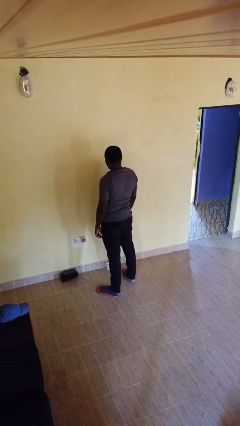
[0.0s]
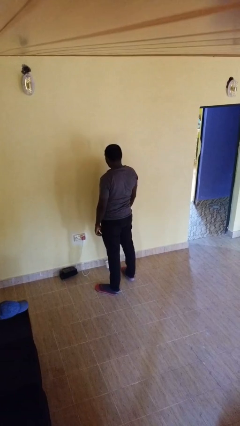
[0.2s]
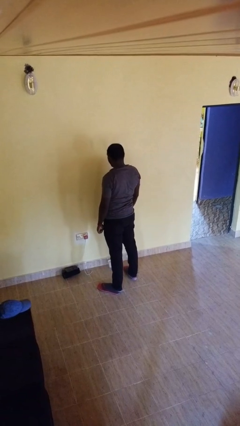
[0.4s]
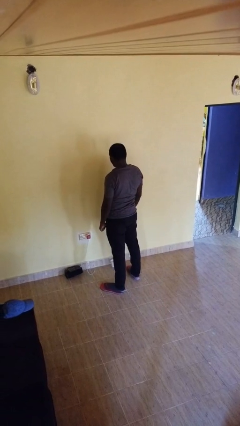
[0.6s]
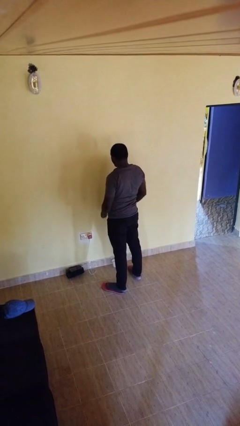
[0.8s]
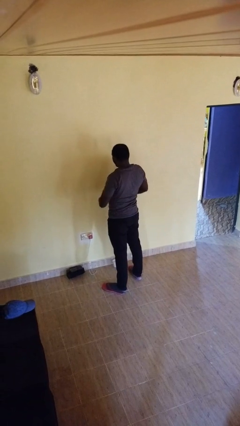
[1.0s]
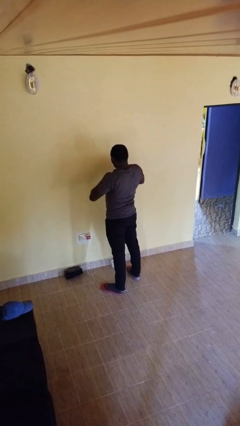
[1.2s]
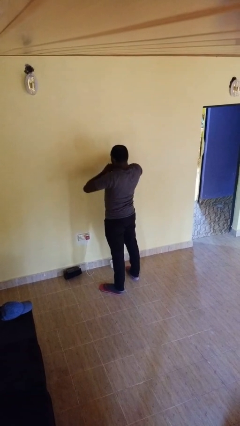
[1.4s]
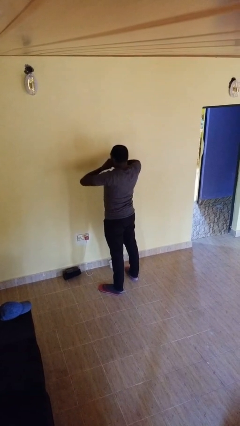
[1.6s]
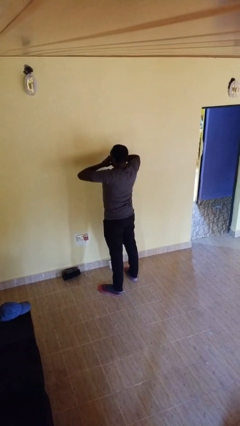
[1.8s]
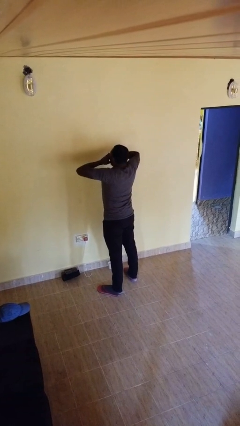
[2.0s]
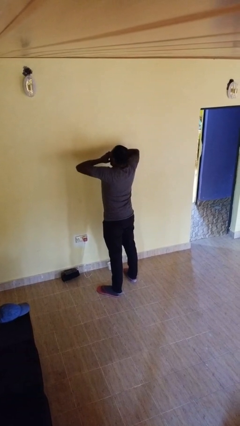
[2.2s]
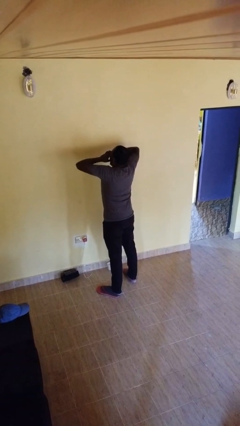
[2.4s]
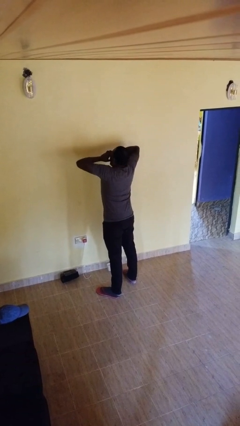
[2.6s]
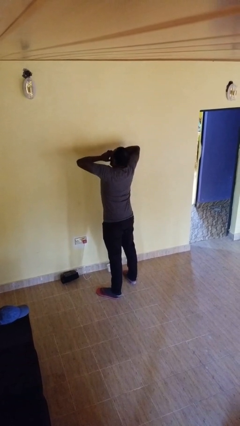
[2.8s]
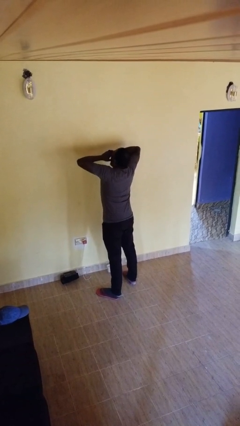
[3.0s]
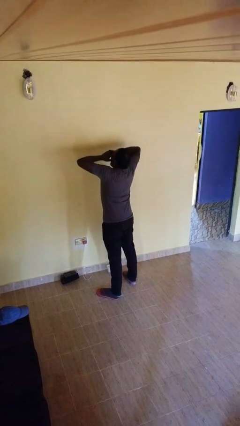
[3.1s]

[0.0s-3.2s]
person yawns

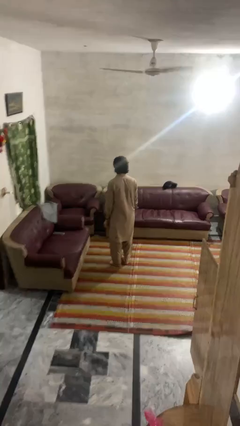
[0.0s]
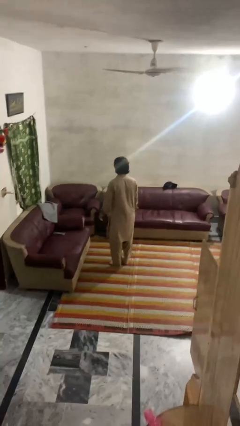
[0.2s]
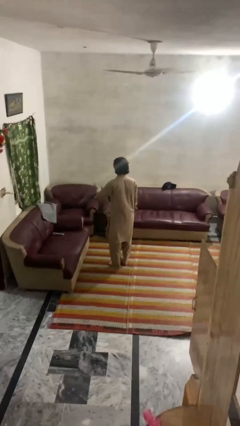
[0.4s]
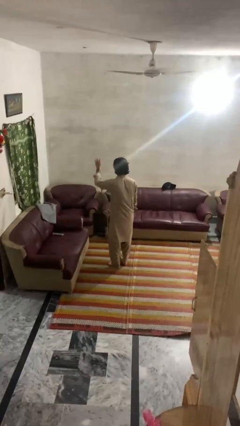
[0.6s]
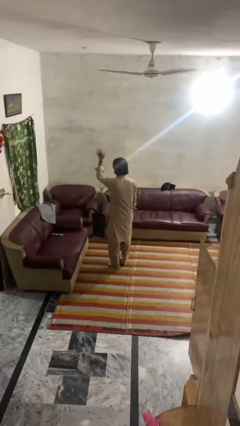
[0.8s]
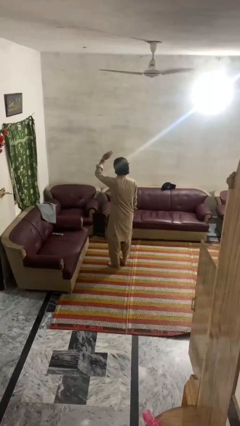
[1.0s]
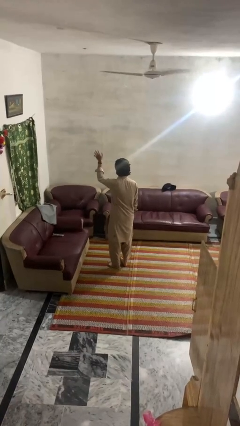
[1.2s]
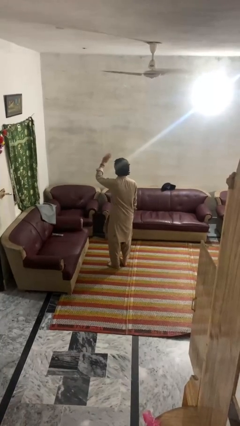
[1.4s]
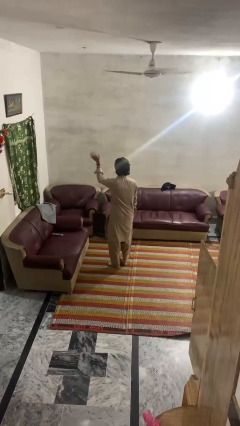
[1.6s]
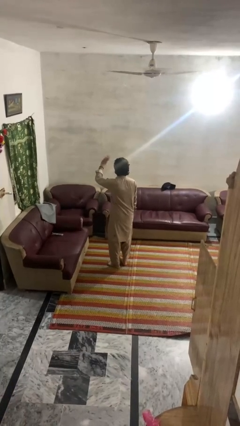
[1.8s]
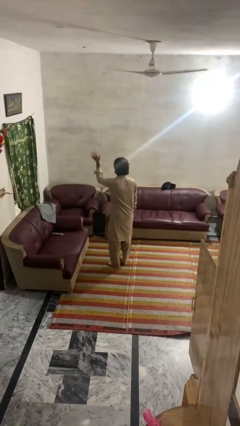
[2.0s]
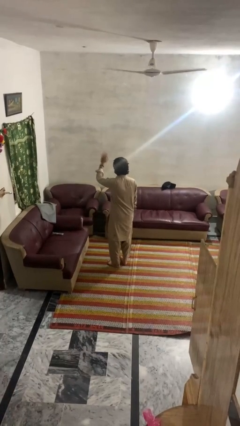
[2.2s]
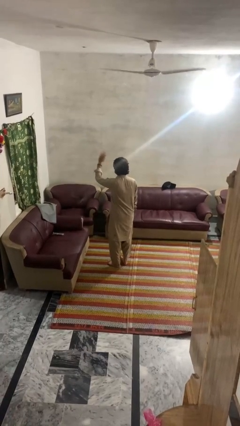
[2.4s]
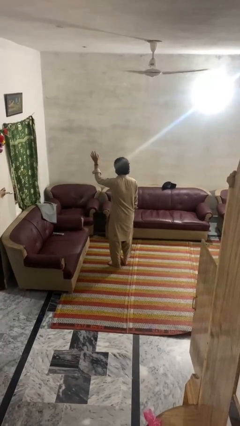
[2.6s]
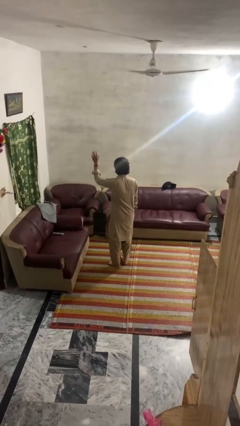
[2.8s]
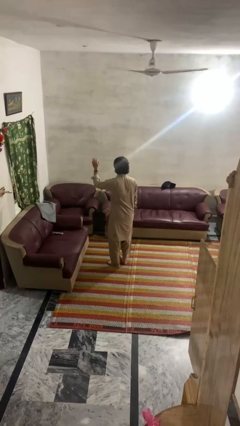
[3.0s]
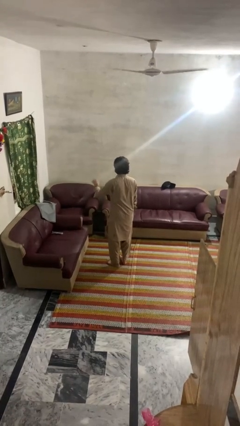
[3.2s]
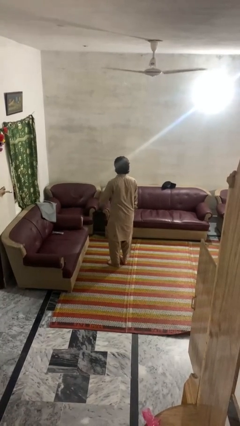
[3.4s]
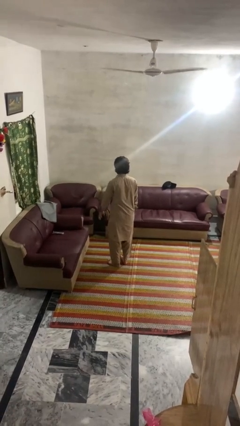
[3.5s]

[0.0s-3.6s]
person waves at person

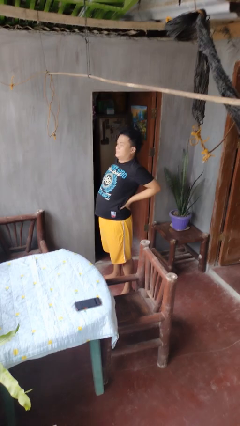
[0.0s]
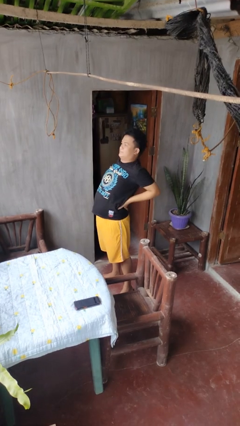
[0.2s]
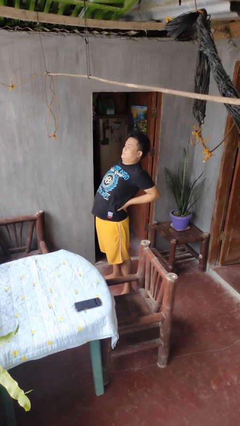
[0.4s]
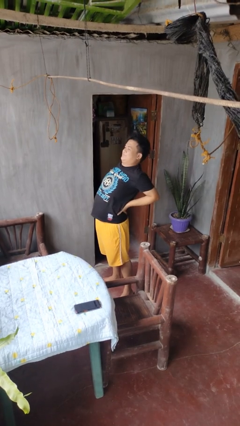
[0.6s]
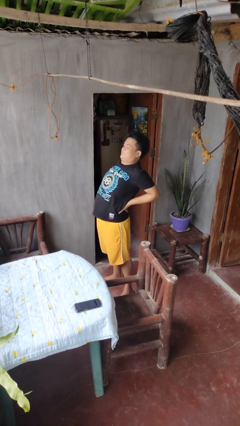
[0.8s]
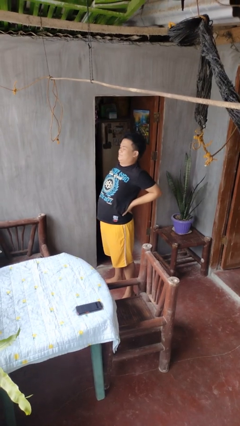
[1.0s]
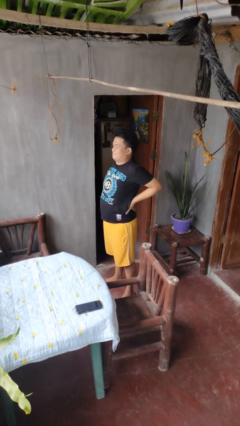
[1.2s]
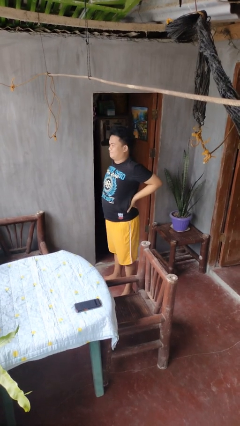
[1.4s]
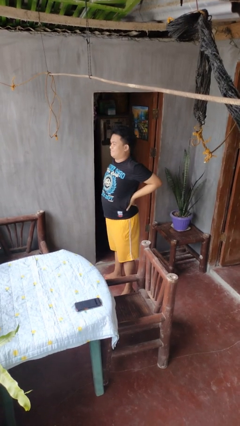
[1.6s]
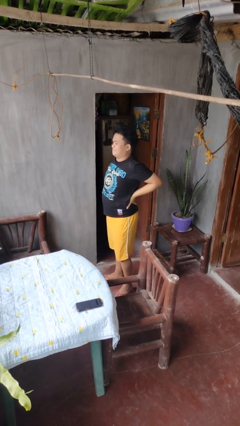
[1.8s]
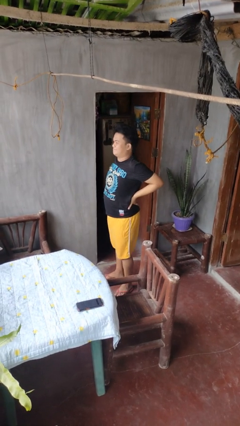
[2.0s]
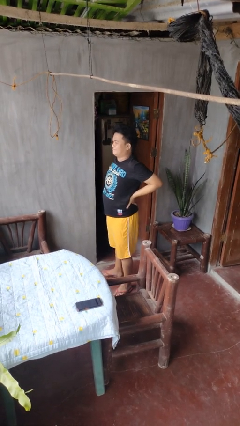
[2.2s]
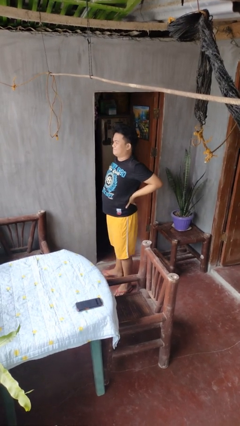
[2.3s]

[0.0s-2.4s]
person stretches back

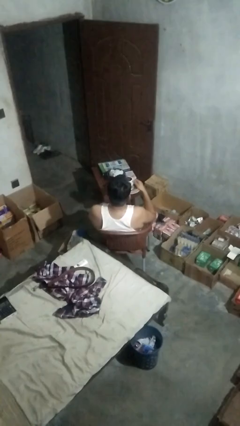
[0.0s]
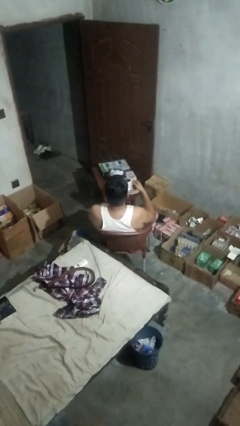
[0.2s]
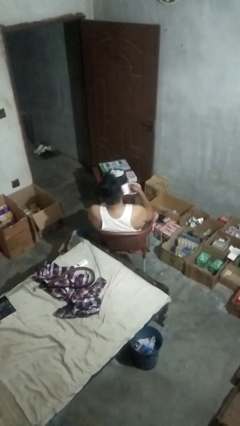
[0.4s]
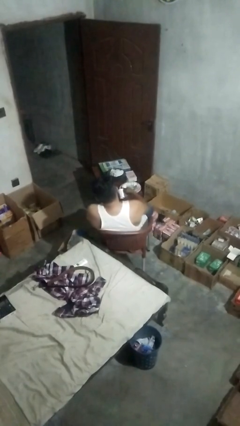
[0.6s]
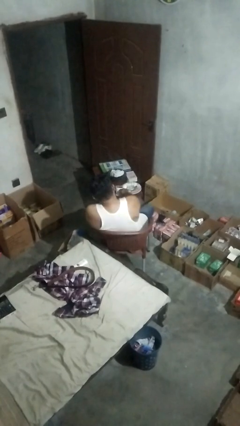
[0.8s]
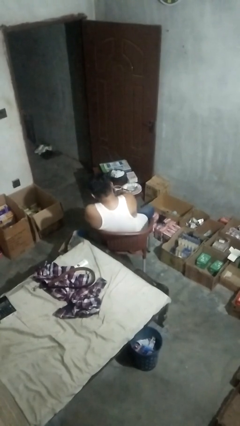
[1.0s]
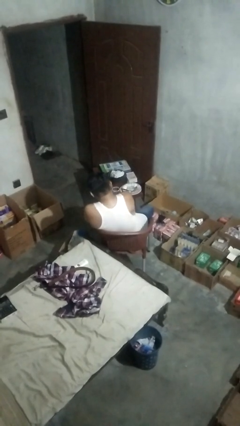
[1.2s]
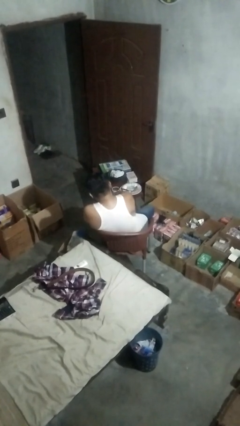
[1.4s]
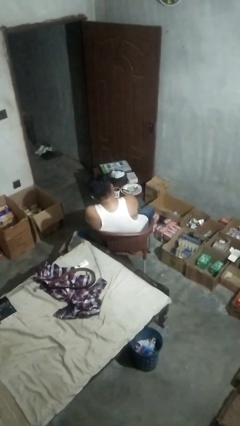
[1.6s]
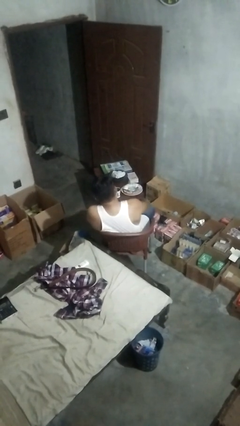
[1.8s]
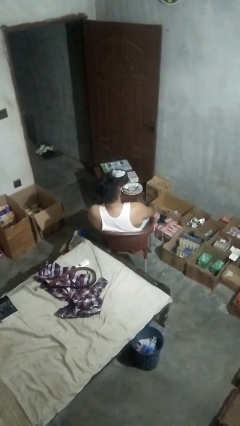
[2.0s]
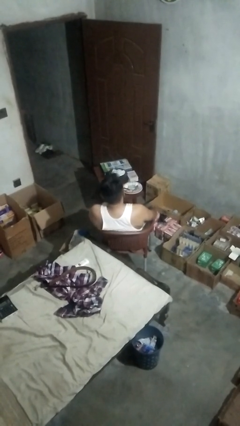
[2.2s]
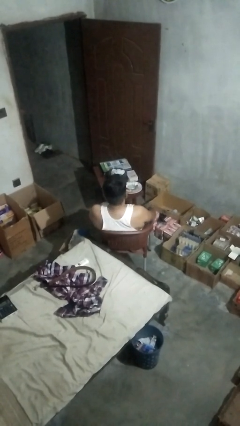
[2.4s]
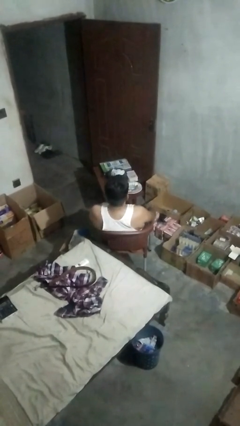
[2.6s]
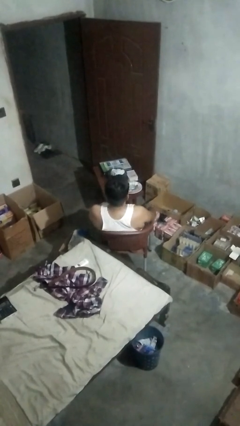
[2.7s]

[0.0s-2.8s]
person puts down object on table

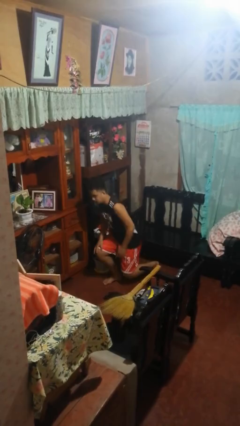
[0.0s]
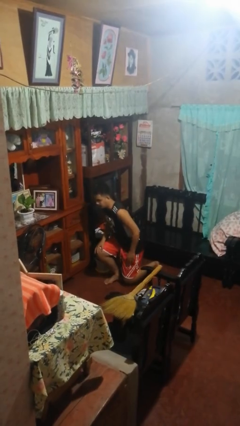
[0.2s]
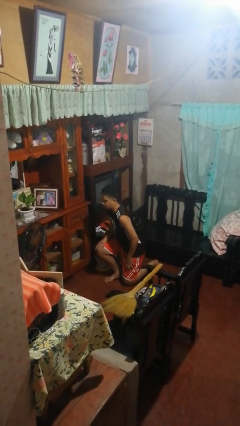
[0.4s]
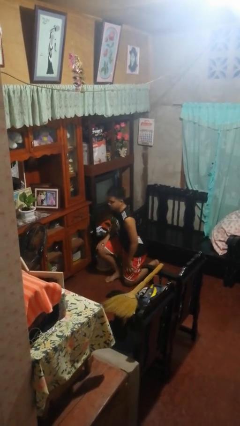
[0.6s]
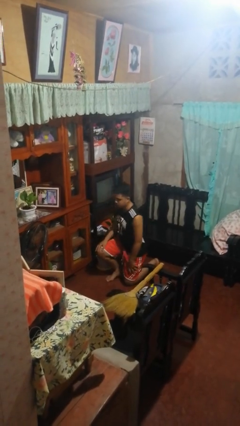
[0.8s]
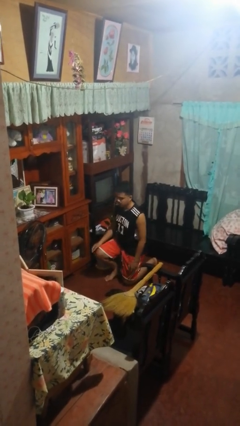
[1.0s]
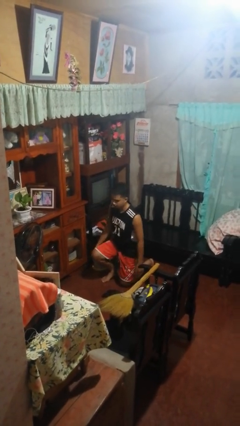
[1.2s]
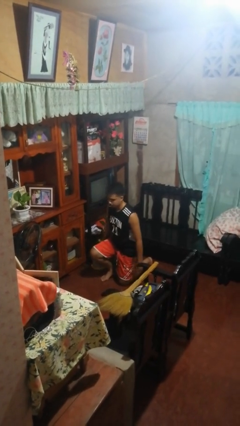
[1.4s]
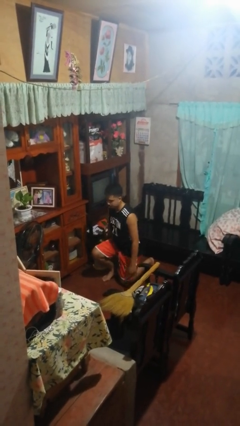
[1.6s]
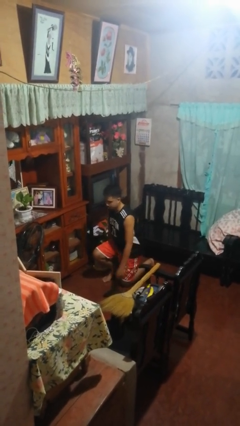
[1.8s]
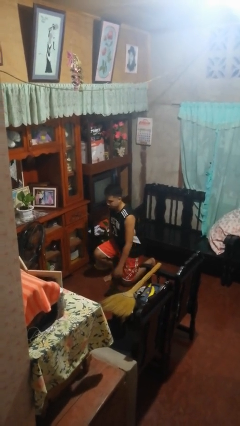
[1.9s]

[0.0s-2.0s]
person kneels

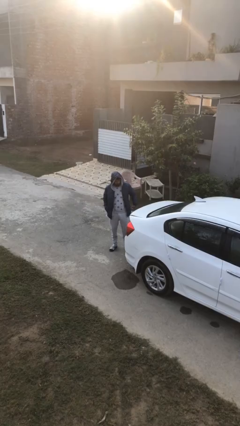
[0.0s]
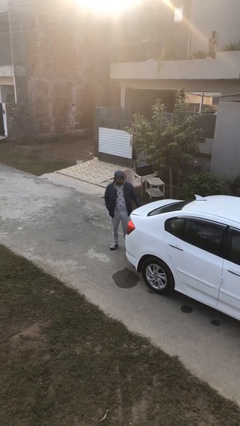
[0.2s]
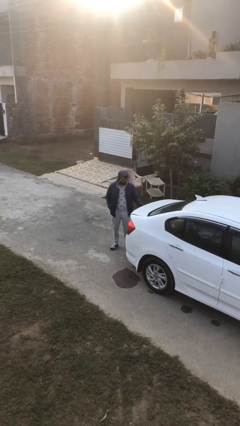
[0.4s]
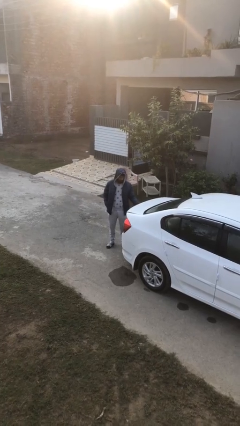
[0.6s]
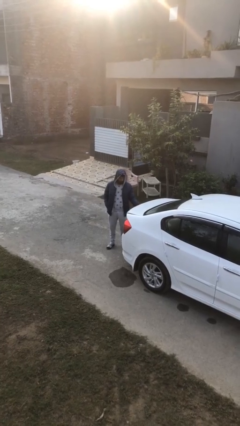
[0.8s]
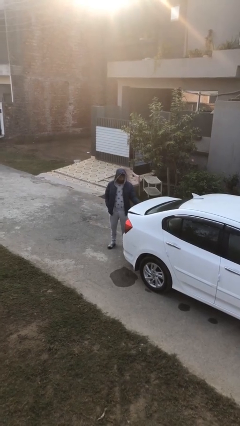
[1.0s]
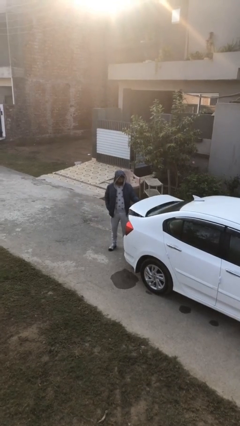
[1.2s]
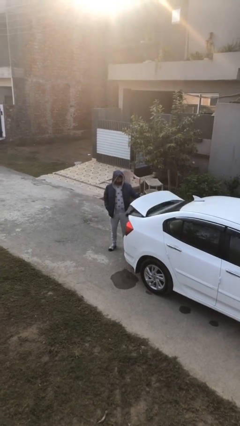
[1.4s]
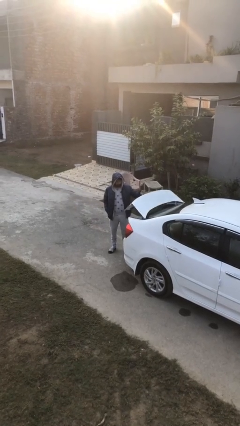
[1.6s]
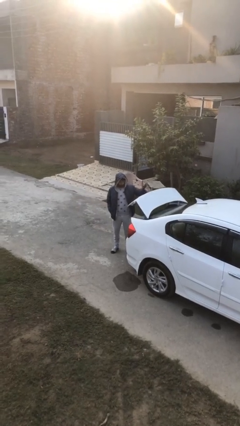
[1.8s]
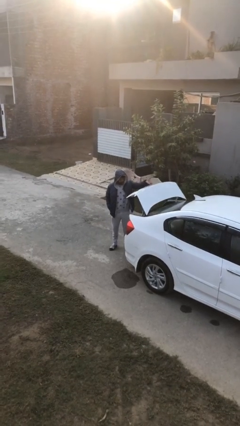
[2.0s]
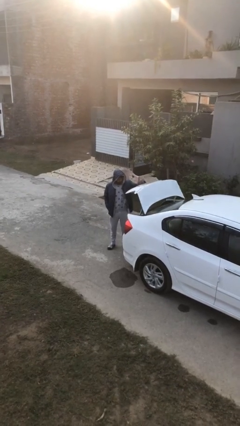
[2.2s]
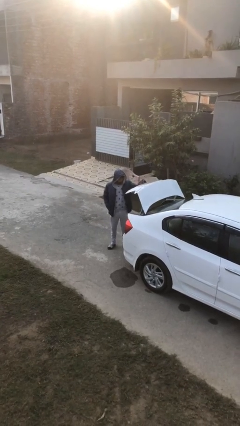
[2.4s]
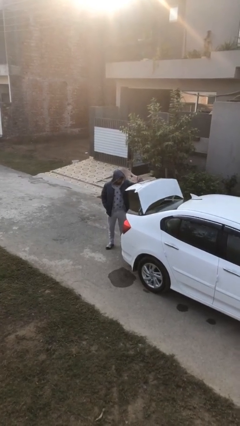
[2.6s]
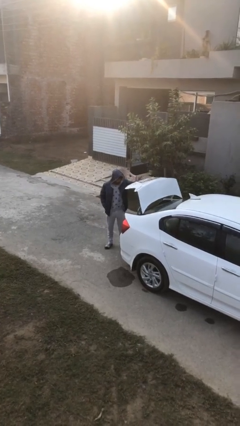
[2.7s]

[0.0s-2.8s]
person opens car trunk

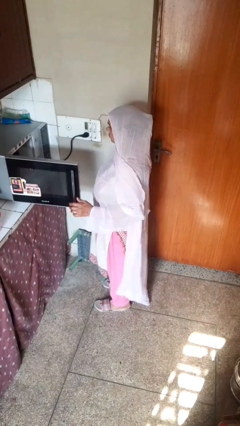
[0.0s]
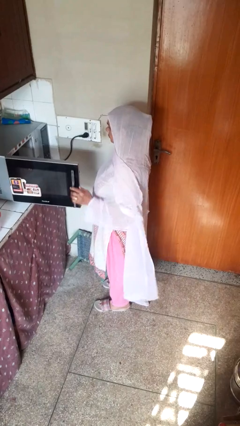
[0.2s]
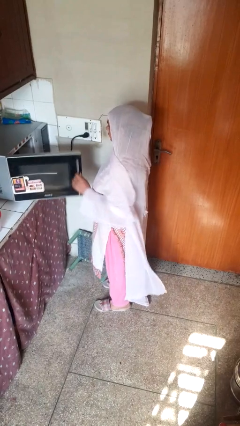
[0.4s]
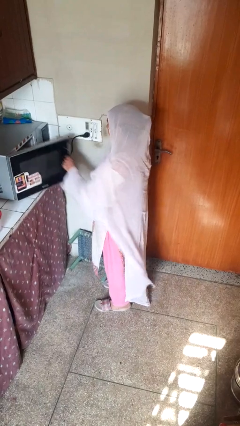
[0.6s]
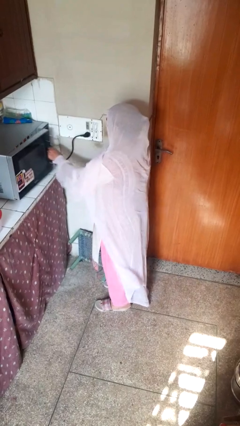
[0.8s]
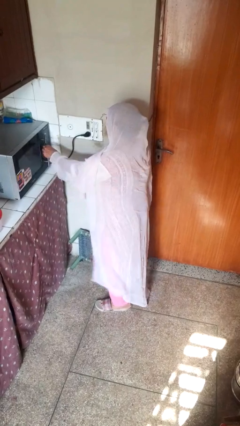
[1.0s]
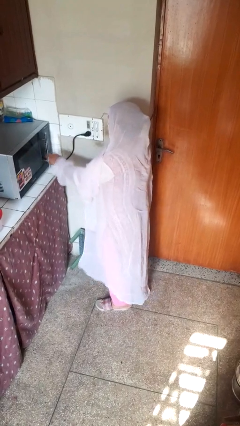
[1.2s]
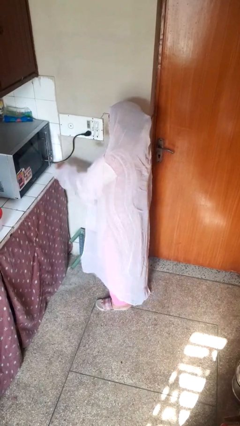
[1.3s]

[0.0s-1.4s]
person closes oven door
